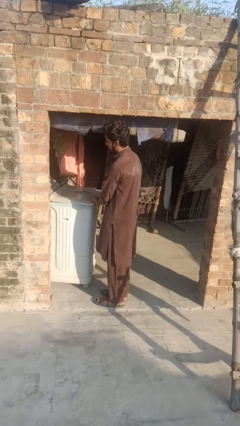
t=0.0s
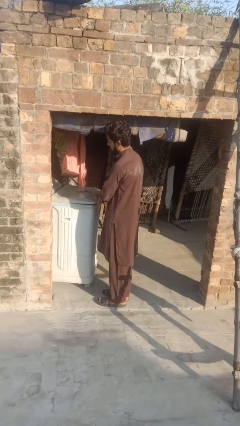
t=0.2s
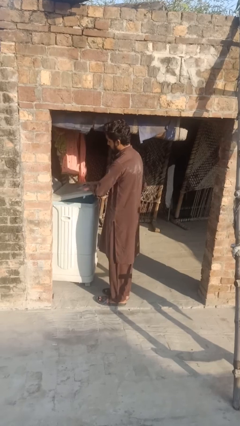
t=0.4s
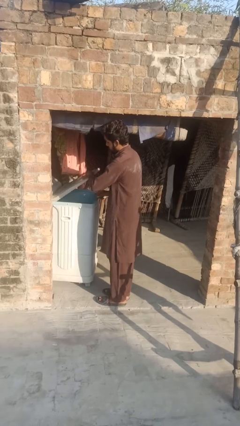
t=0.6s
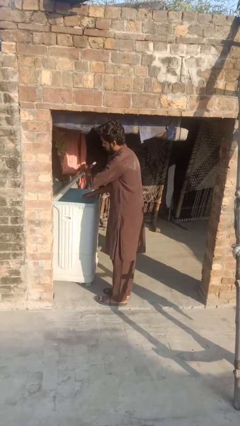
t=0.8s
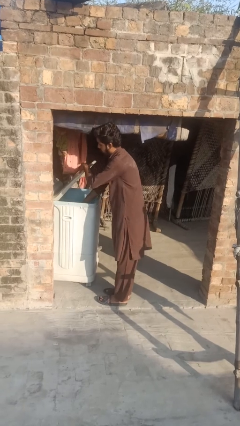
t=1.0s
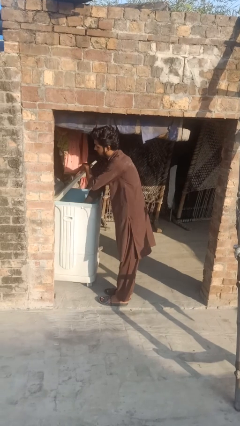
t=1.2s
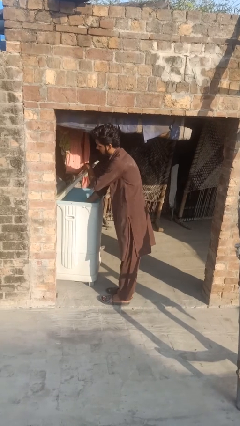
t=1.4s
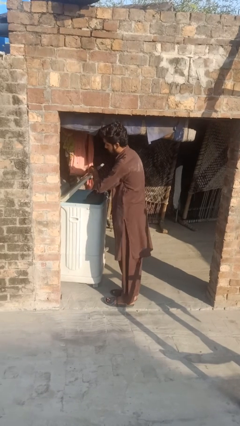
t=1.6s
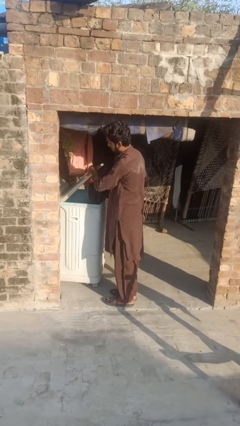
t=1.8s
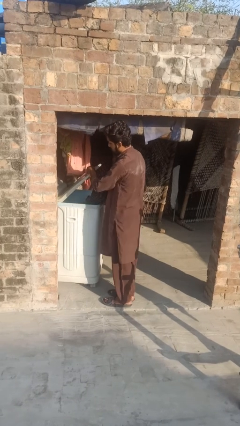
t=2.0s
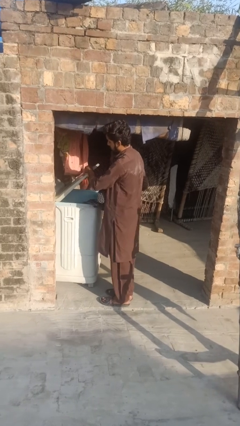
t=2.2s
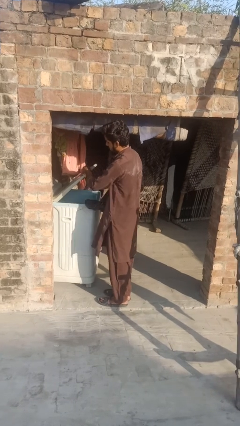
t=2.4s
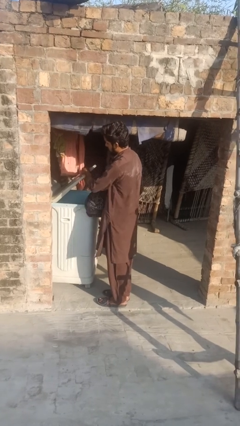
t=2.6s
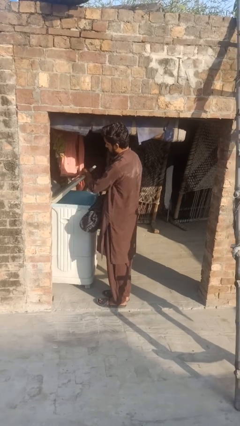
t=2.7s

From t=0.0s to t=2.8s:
person unloads dryer

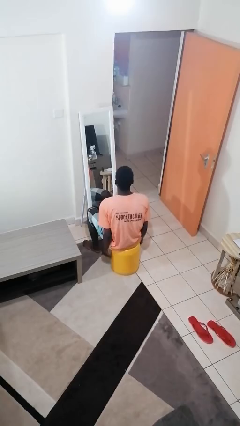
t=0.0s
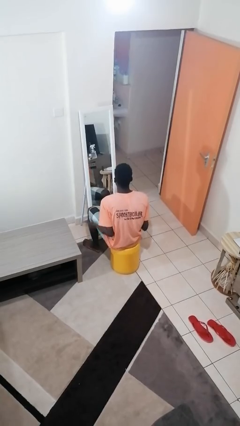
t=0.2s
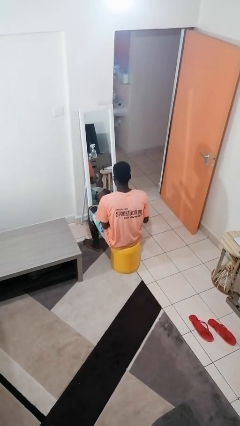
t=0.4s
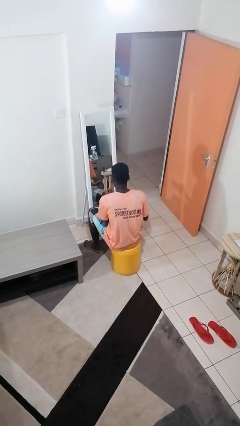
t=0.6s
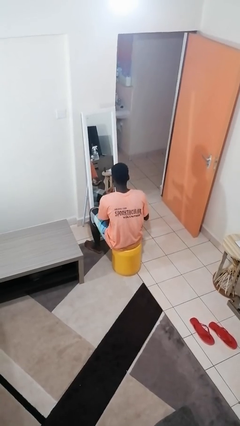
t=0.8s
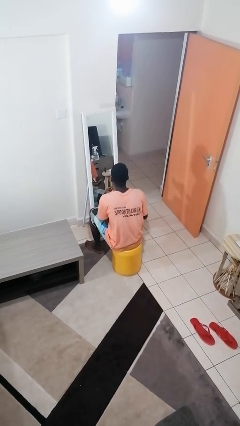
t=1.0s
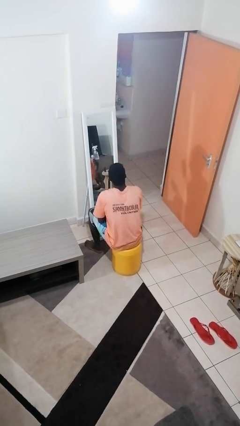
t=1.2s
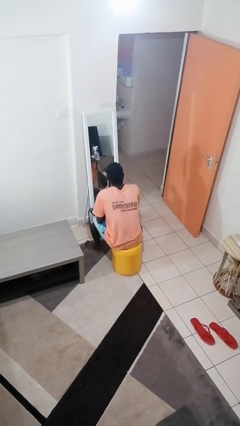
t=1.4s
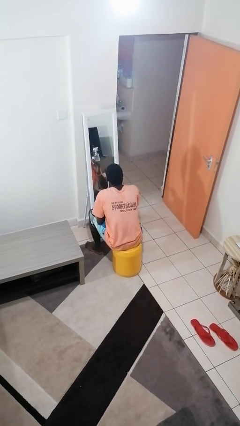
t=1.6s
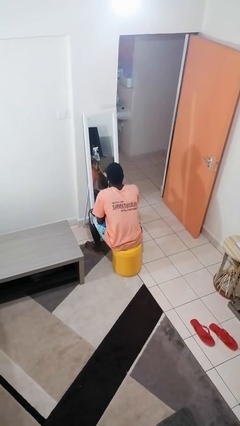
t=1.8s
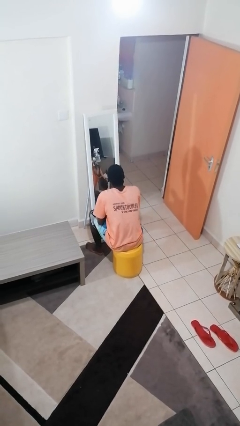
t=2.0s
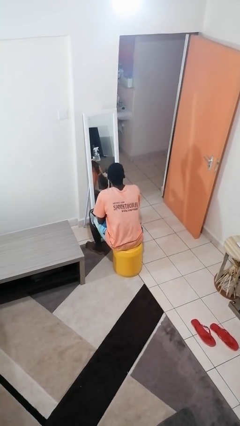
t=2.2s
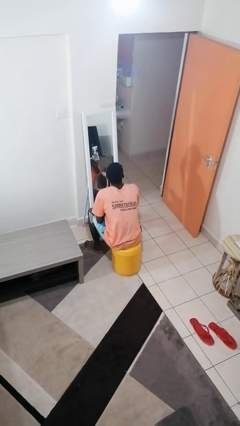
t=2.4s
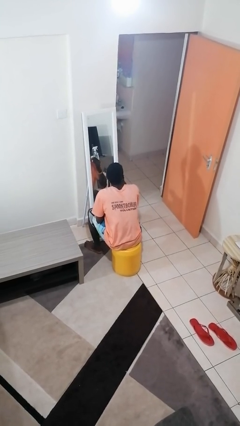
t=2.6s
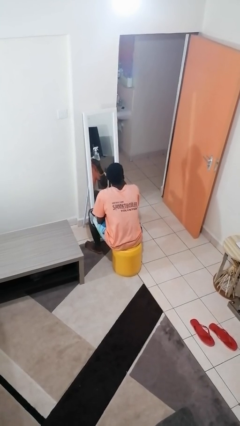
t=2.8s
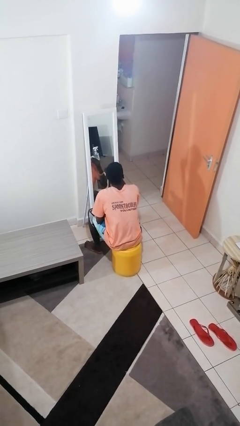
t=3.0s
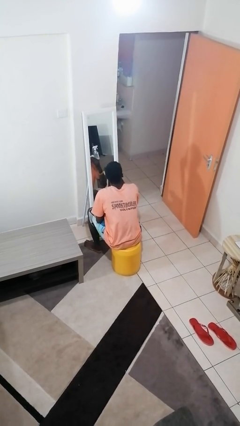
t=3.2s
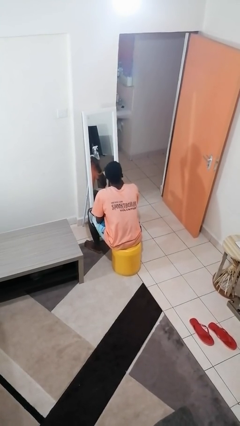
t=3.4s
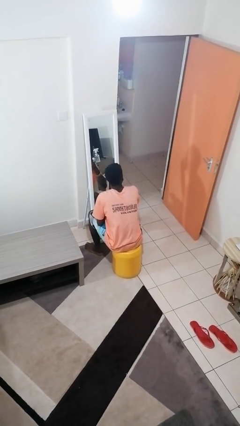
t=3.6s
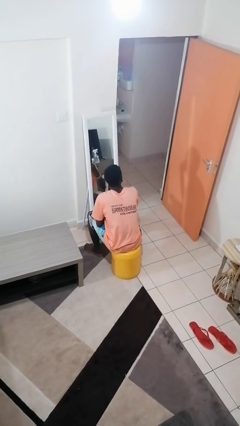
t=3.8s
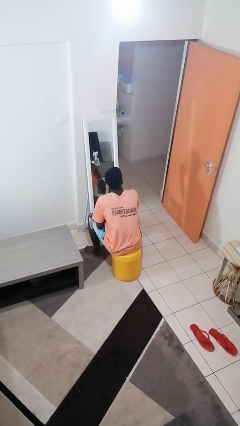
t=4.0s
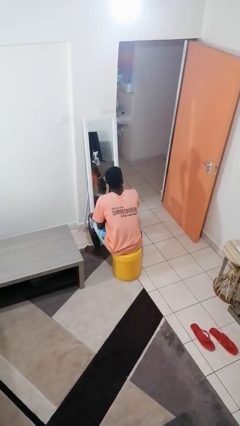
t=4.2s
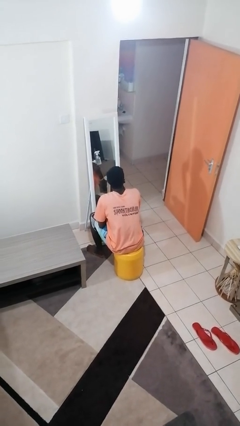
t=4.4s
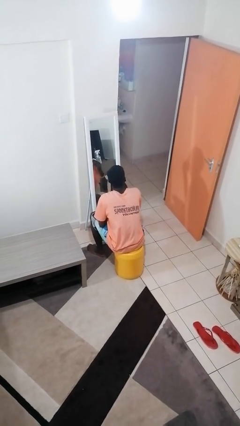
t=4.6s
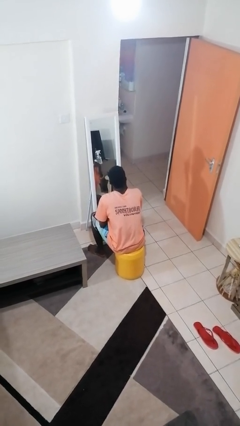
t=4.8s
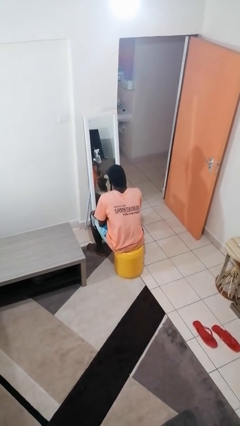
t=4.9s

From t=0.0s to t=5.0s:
person applies foundation makeup

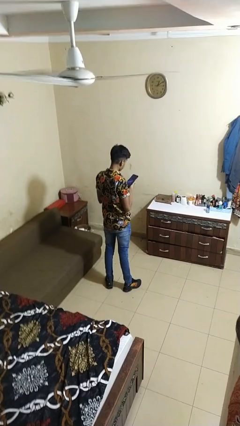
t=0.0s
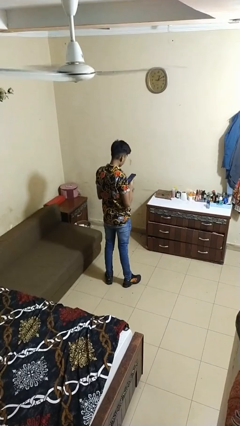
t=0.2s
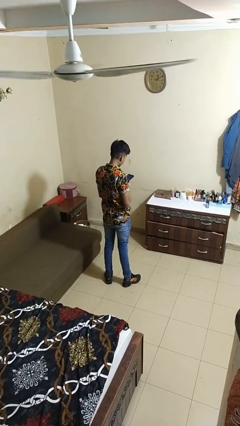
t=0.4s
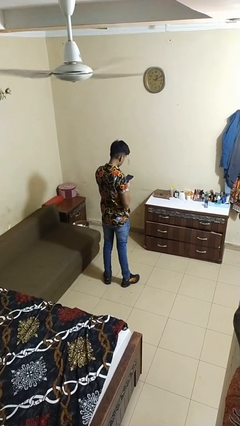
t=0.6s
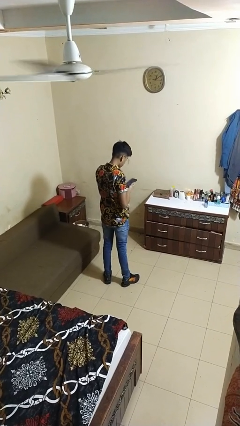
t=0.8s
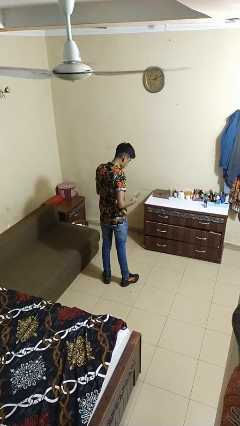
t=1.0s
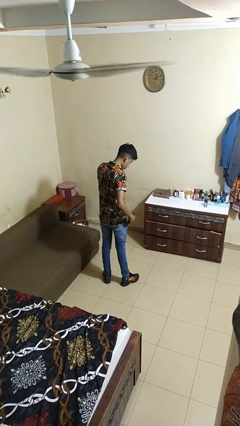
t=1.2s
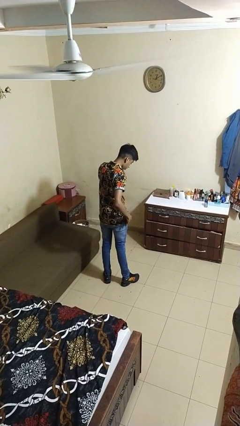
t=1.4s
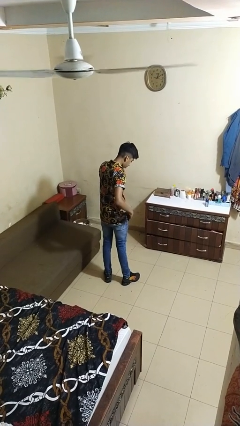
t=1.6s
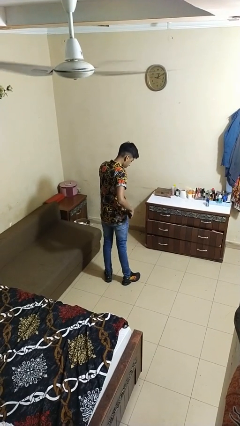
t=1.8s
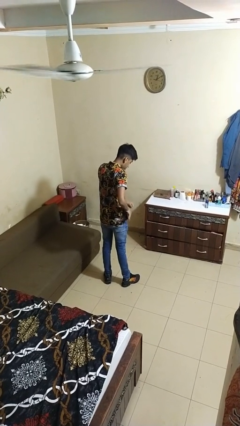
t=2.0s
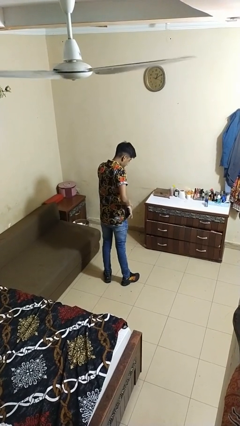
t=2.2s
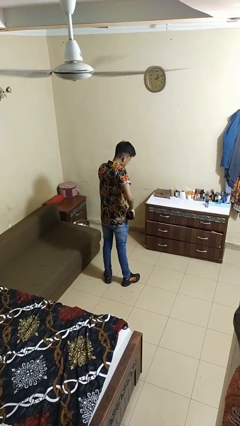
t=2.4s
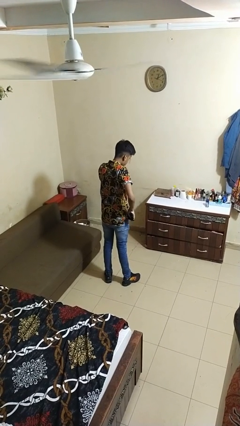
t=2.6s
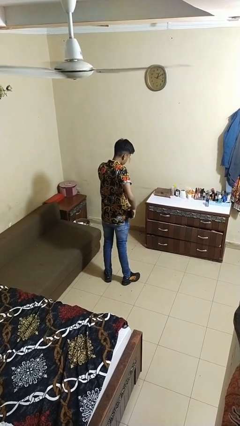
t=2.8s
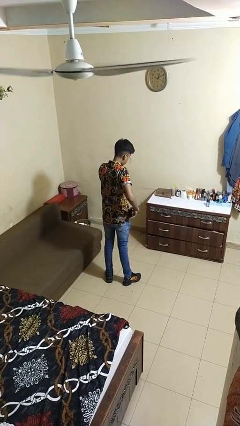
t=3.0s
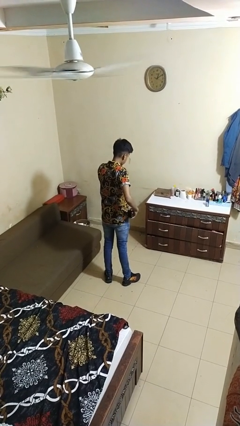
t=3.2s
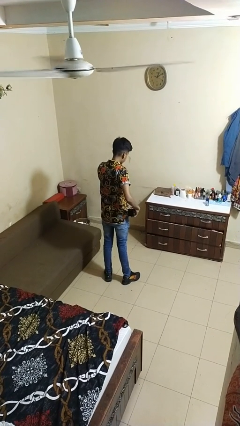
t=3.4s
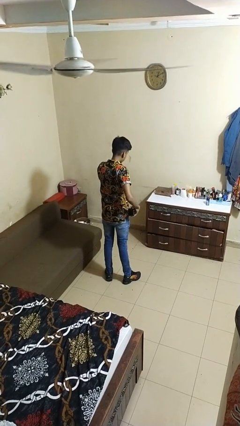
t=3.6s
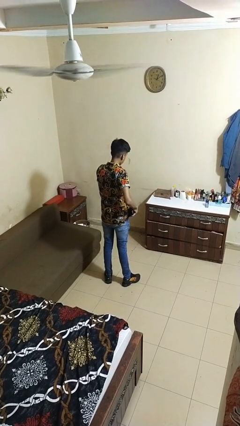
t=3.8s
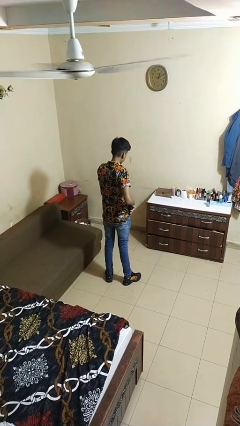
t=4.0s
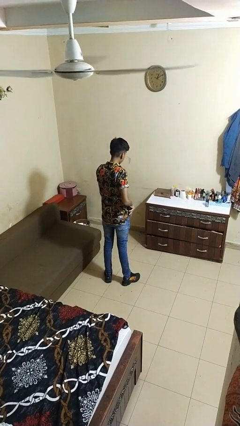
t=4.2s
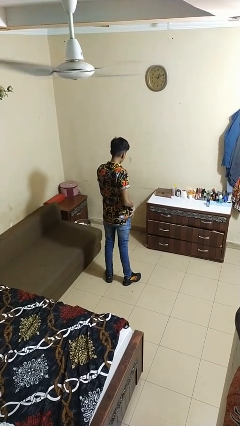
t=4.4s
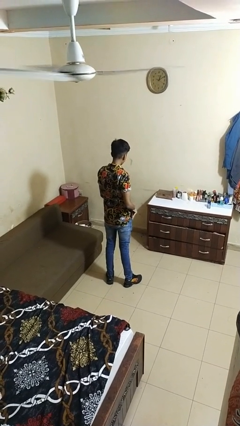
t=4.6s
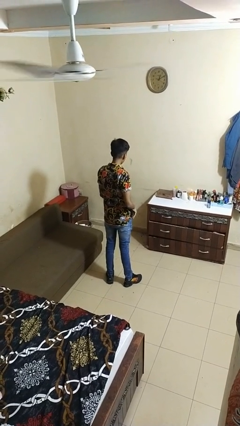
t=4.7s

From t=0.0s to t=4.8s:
person puts phone into pocket

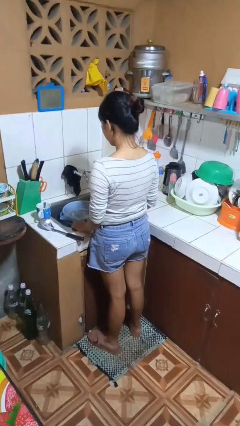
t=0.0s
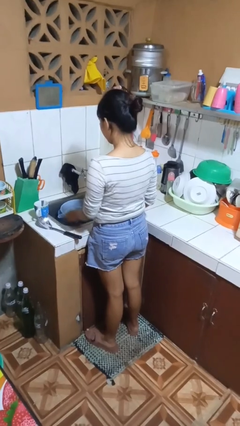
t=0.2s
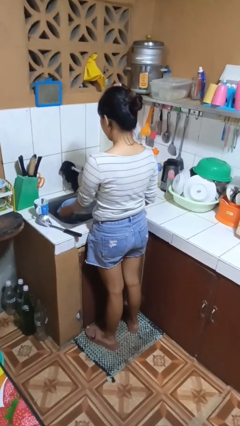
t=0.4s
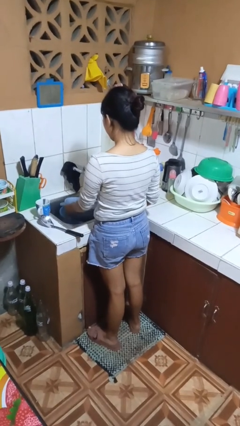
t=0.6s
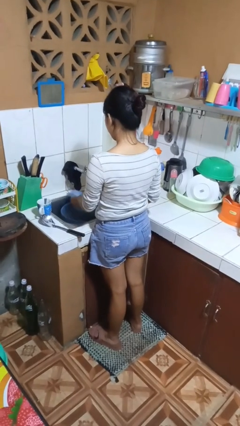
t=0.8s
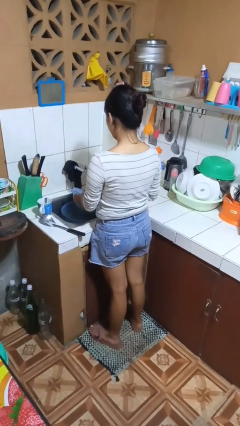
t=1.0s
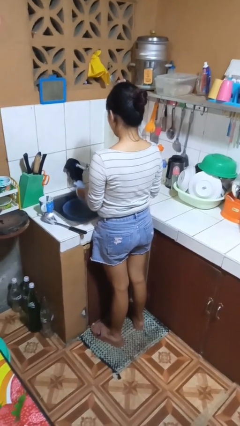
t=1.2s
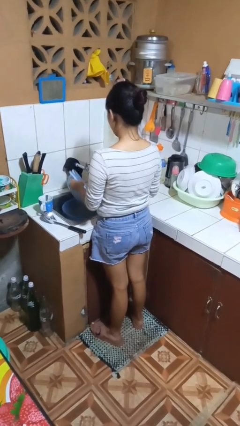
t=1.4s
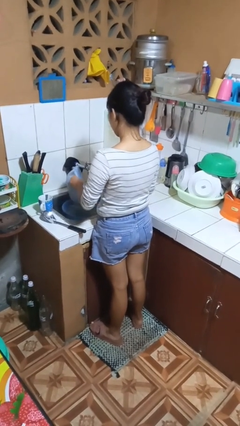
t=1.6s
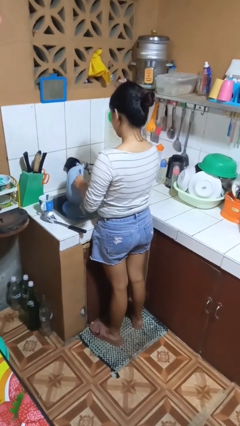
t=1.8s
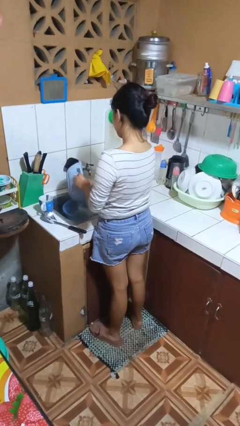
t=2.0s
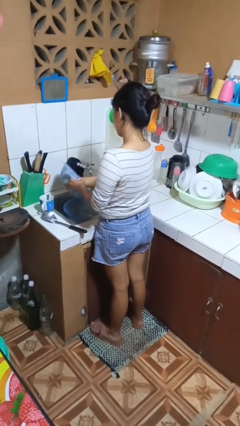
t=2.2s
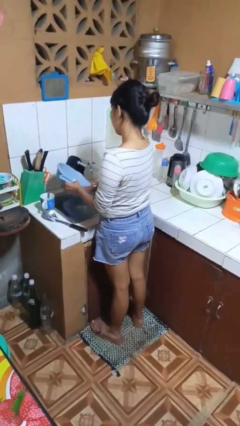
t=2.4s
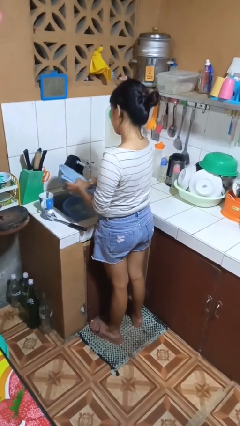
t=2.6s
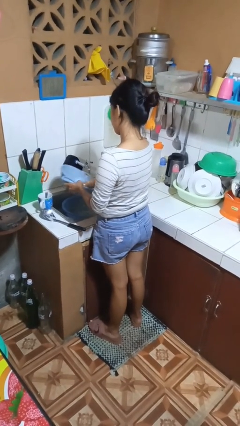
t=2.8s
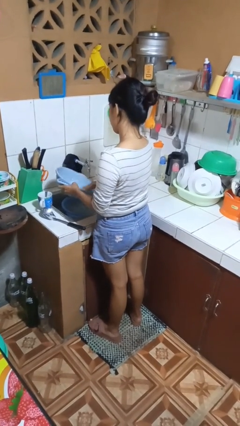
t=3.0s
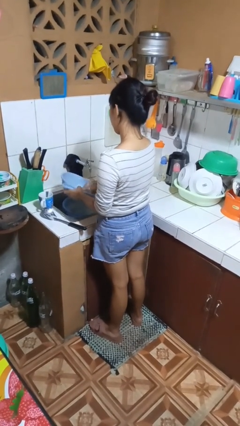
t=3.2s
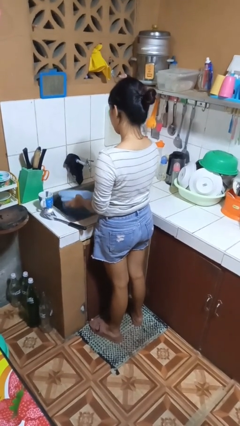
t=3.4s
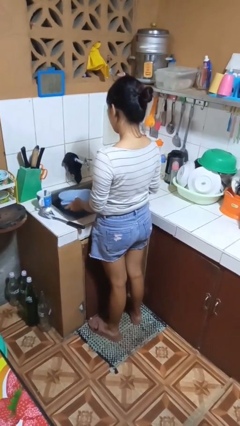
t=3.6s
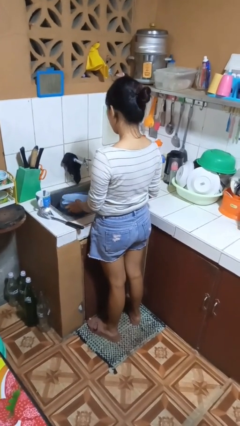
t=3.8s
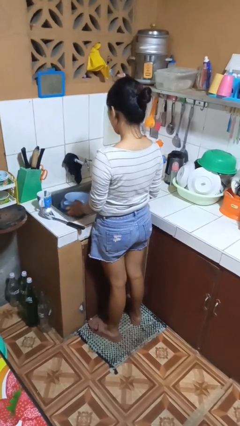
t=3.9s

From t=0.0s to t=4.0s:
person washes dish

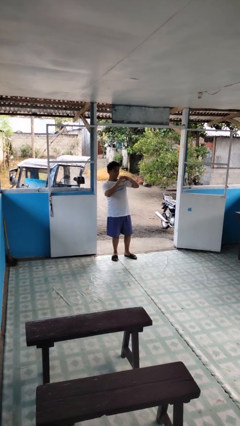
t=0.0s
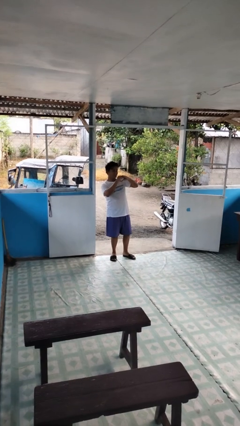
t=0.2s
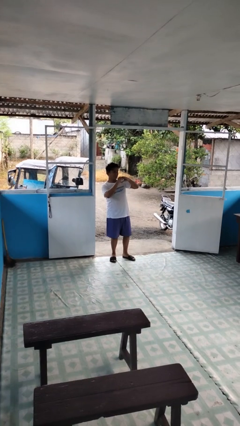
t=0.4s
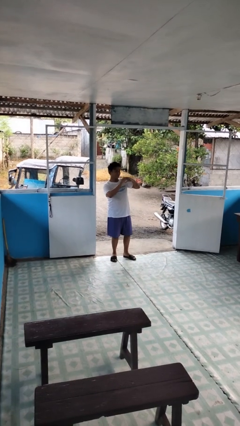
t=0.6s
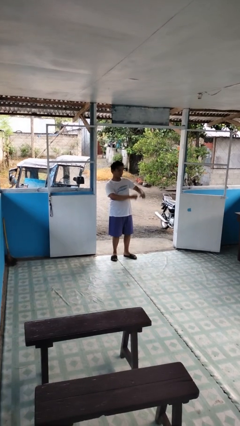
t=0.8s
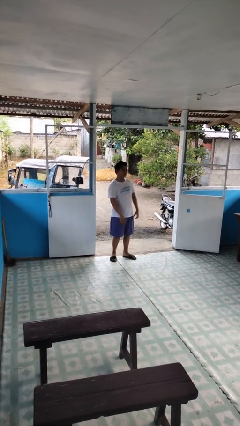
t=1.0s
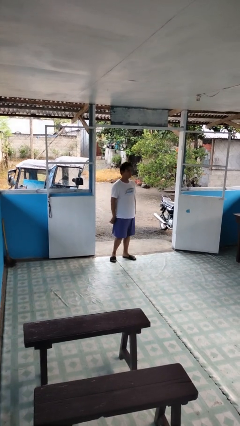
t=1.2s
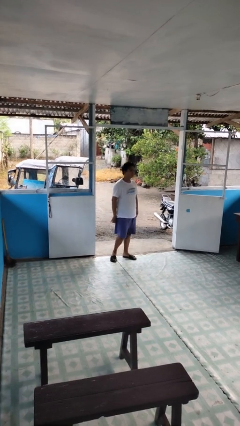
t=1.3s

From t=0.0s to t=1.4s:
person gestures heart
